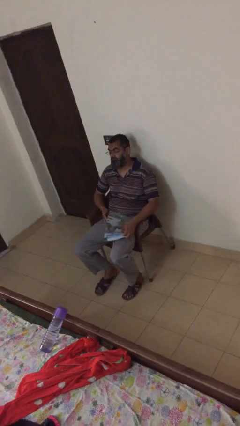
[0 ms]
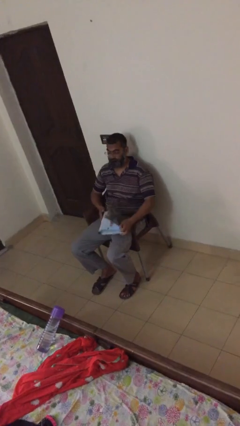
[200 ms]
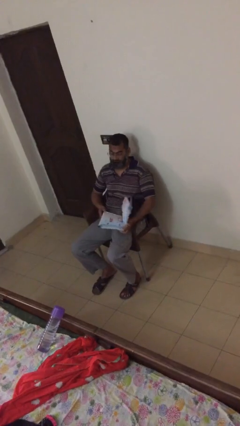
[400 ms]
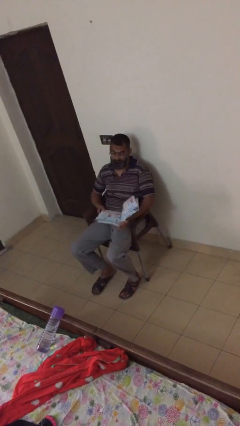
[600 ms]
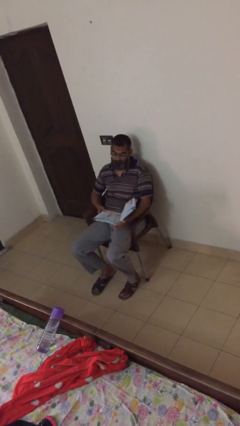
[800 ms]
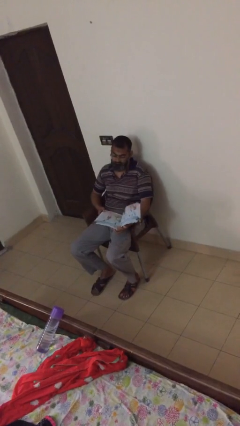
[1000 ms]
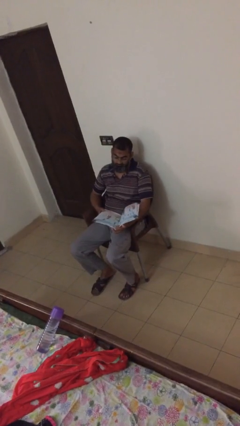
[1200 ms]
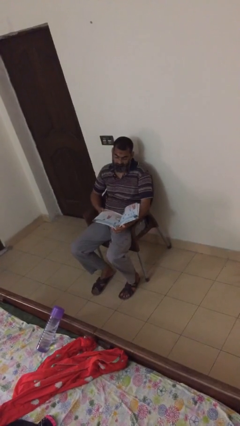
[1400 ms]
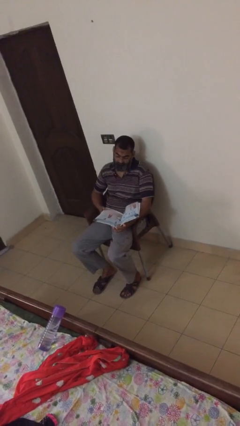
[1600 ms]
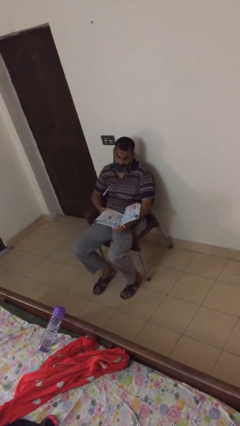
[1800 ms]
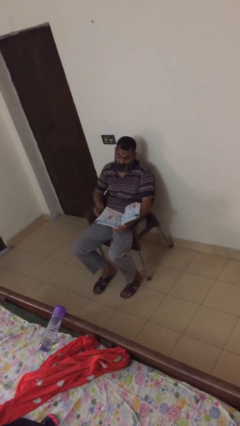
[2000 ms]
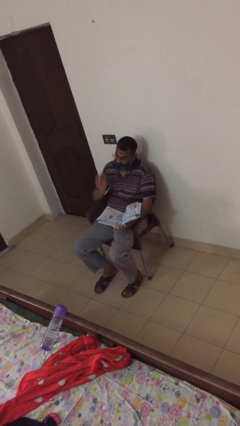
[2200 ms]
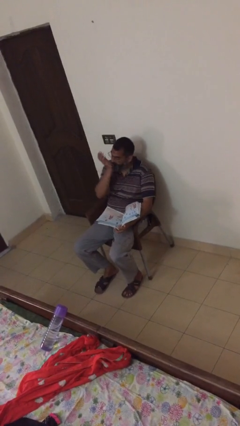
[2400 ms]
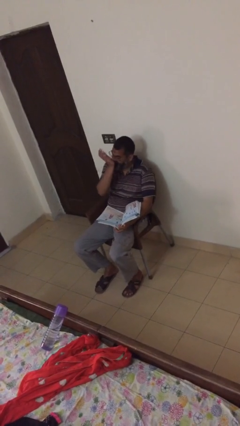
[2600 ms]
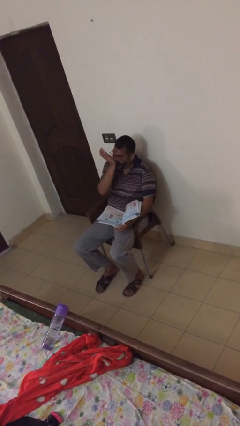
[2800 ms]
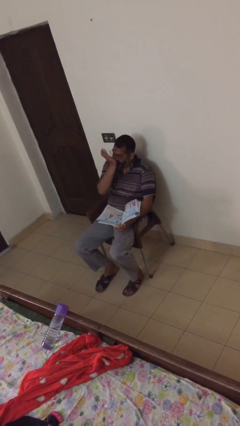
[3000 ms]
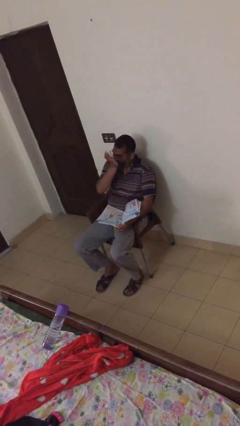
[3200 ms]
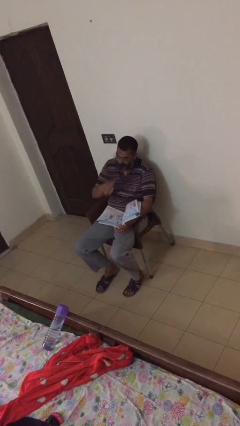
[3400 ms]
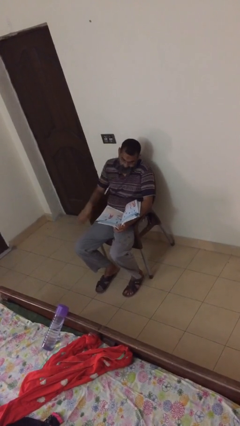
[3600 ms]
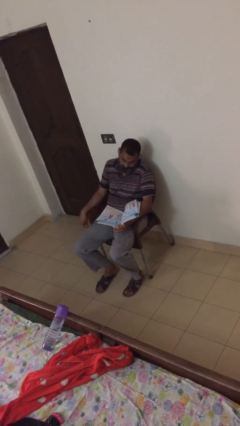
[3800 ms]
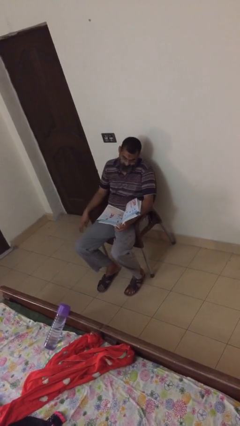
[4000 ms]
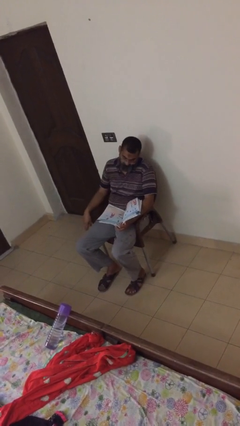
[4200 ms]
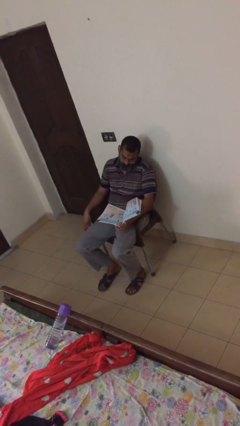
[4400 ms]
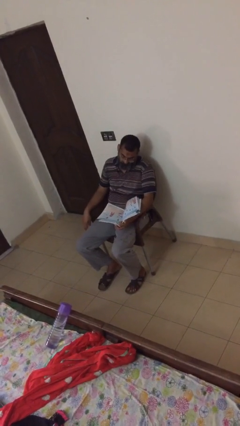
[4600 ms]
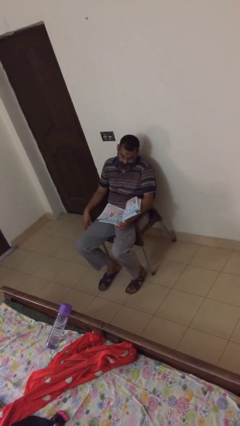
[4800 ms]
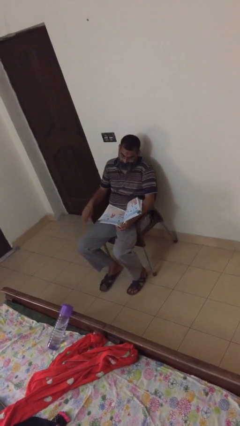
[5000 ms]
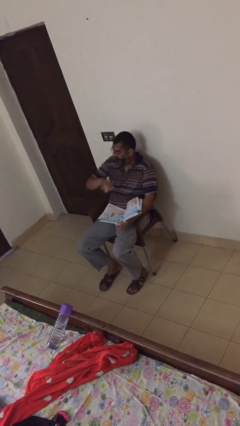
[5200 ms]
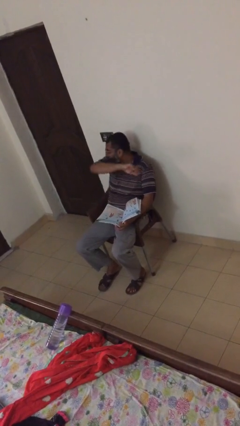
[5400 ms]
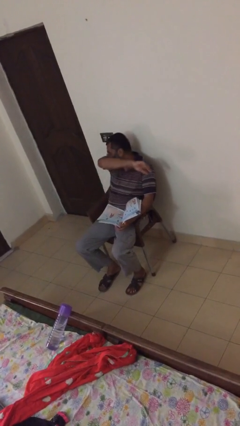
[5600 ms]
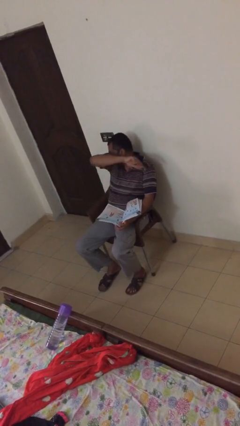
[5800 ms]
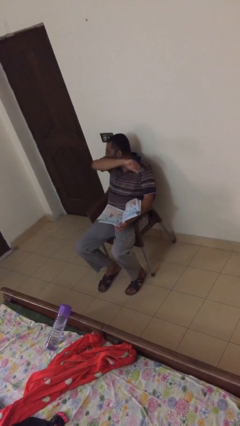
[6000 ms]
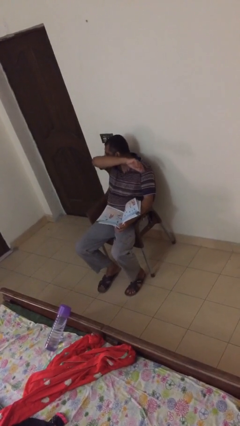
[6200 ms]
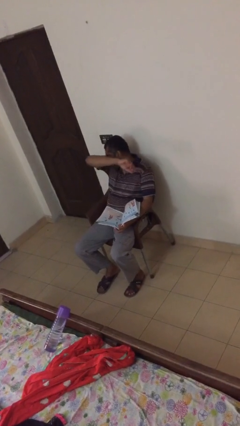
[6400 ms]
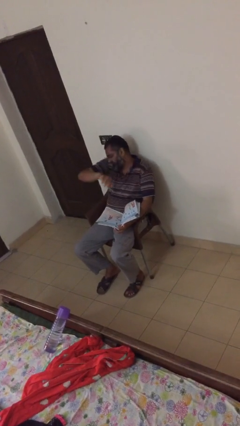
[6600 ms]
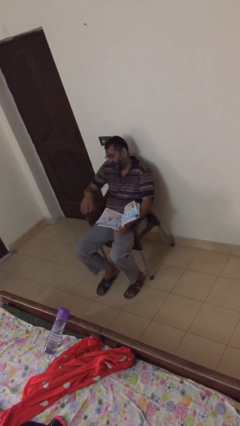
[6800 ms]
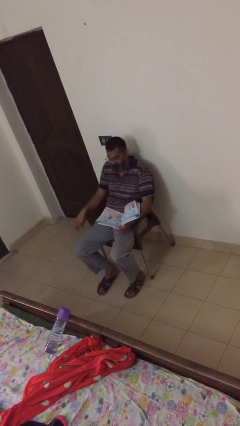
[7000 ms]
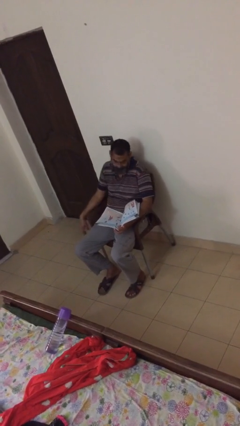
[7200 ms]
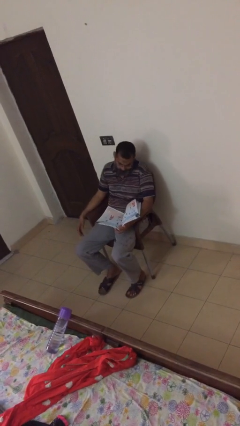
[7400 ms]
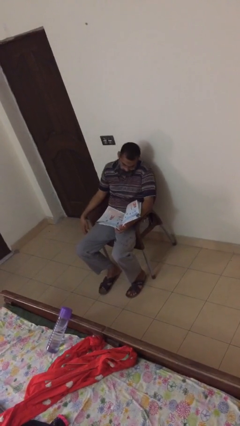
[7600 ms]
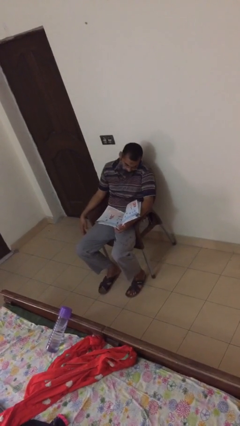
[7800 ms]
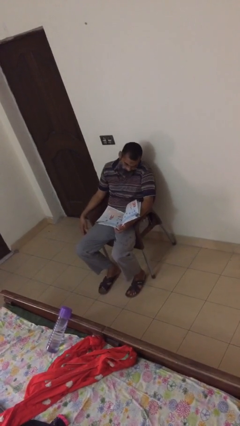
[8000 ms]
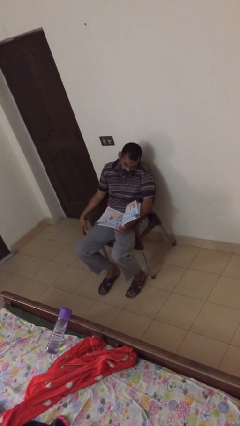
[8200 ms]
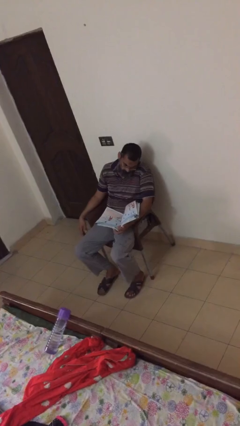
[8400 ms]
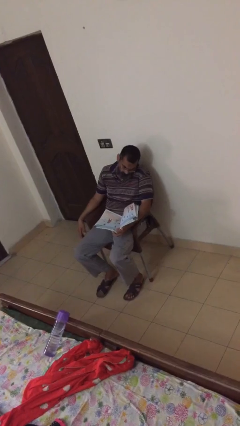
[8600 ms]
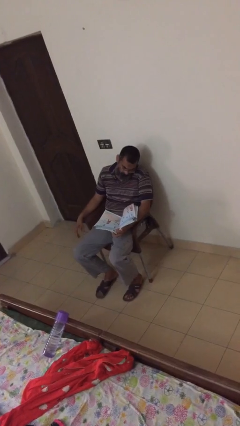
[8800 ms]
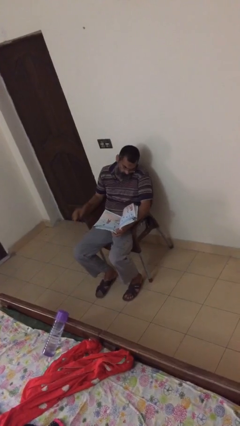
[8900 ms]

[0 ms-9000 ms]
person reads document

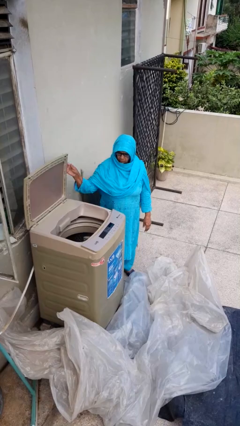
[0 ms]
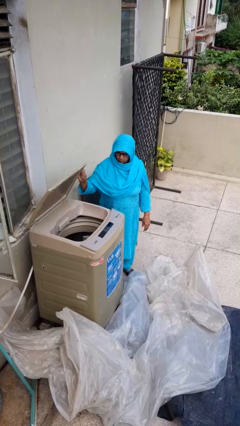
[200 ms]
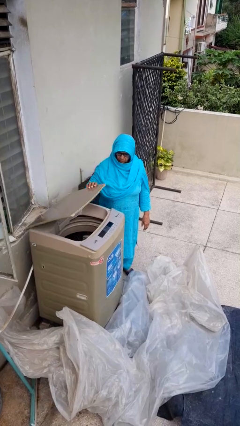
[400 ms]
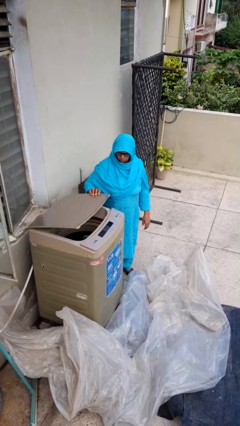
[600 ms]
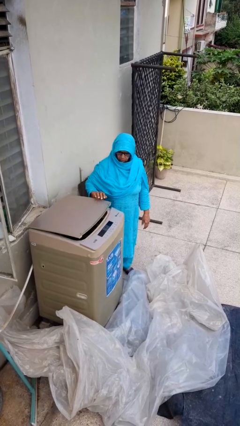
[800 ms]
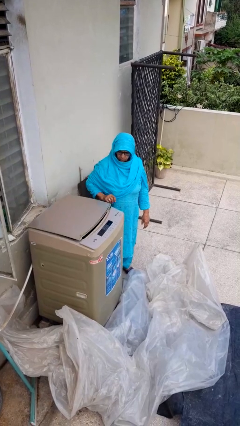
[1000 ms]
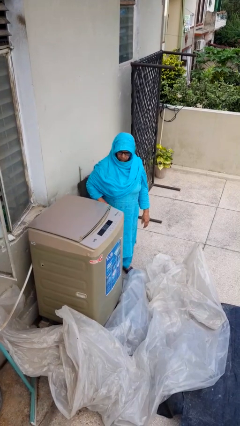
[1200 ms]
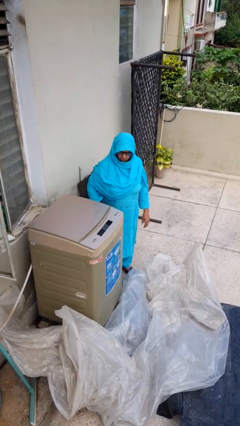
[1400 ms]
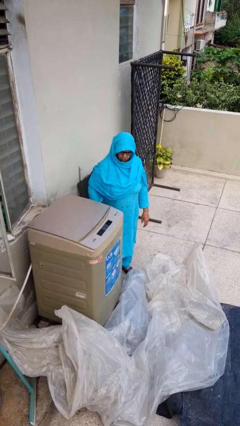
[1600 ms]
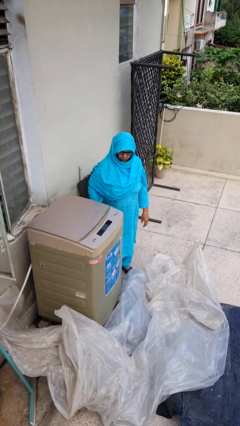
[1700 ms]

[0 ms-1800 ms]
person closes clothes washer

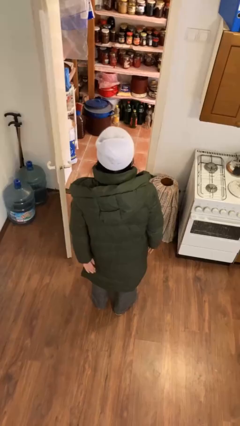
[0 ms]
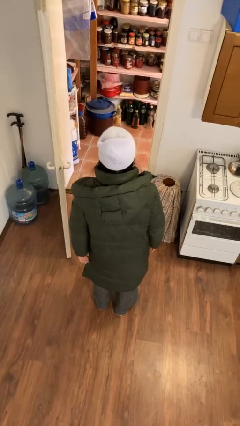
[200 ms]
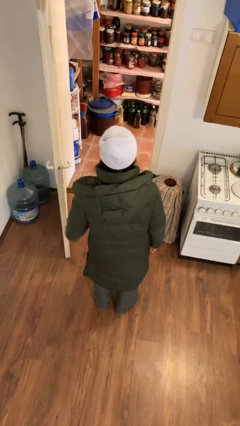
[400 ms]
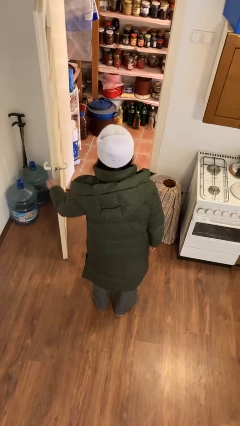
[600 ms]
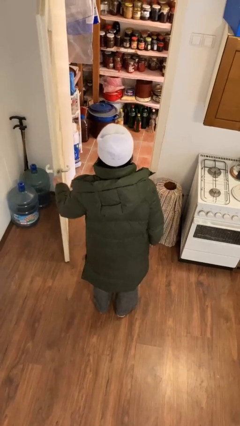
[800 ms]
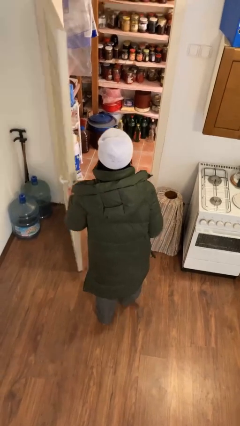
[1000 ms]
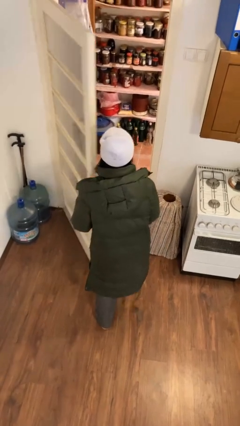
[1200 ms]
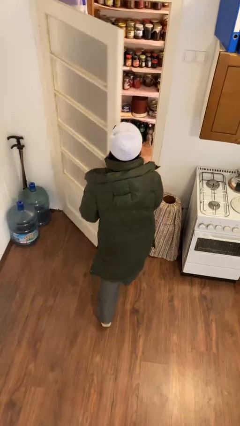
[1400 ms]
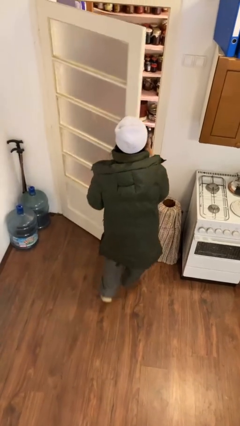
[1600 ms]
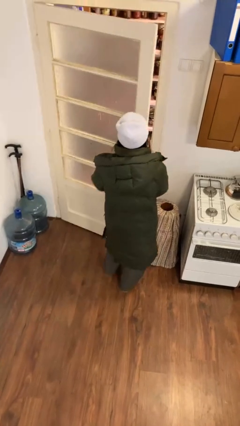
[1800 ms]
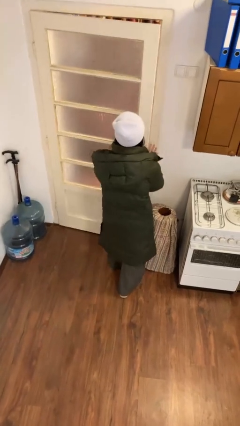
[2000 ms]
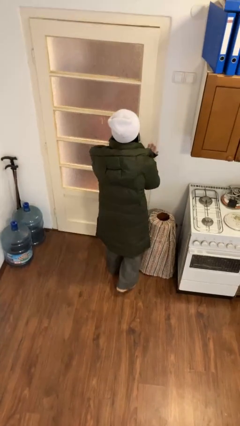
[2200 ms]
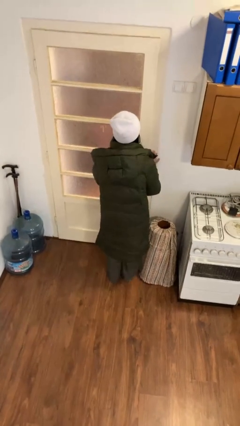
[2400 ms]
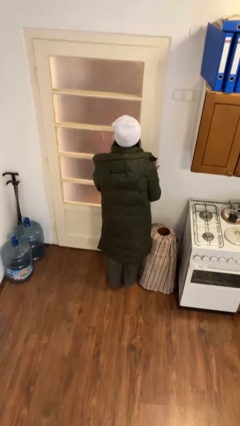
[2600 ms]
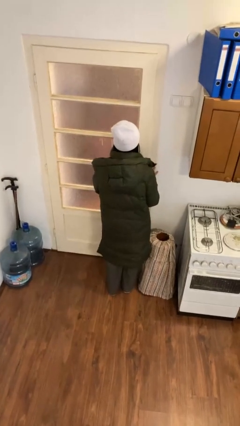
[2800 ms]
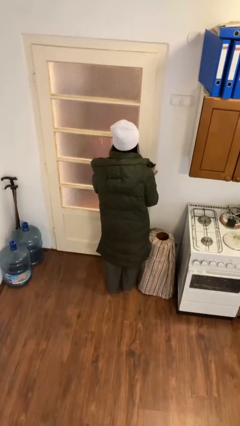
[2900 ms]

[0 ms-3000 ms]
person closes facility door

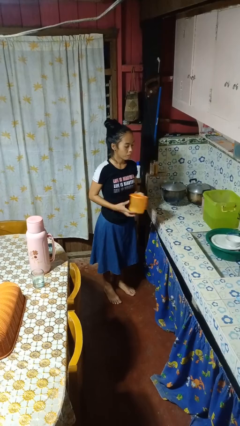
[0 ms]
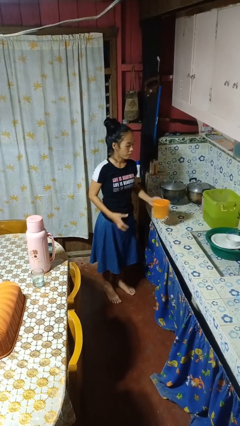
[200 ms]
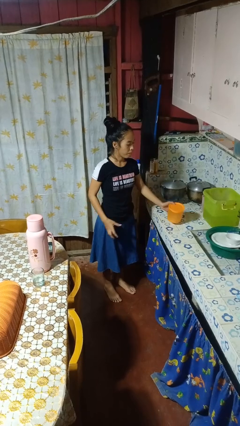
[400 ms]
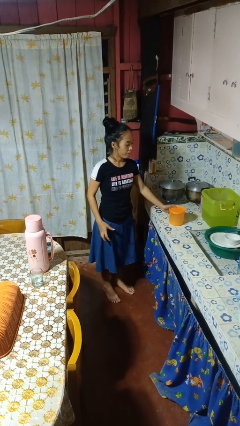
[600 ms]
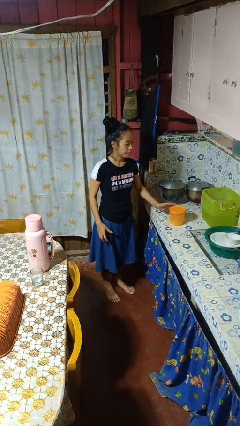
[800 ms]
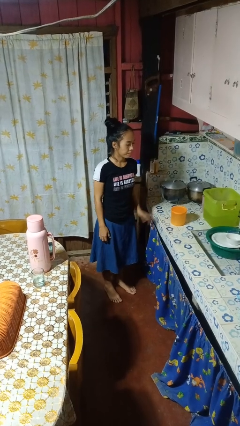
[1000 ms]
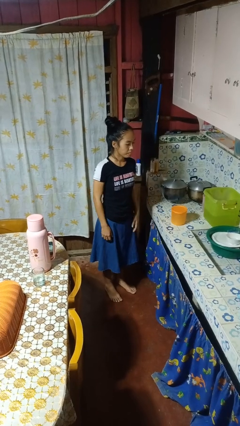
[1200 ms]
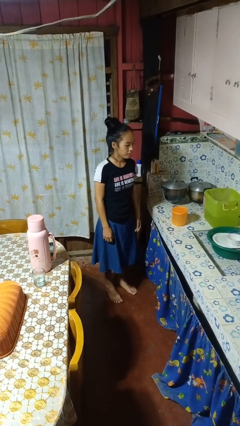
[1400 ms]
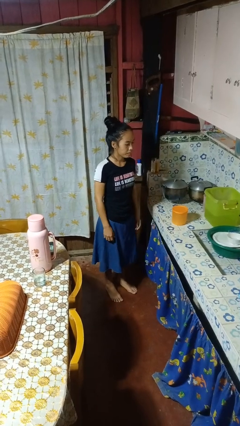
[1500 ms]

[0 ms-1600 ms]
person puts down object on countertop

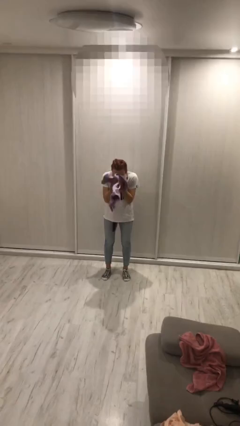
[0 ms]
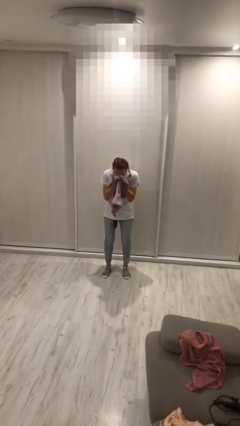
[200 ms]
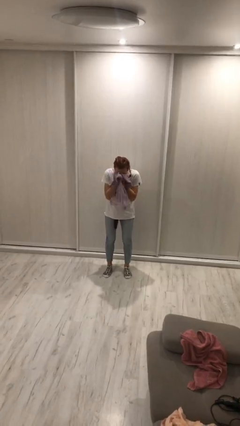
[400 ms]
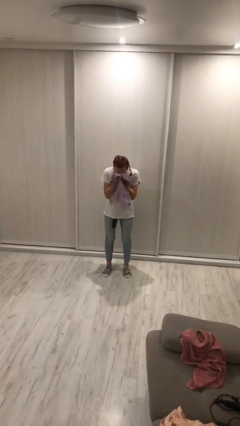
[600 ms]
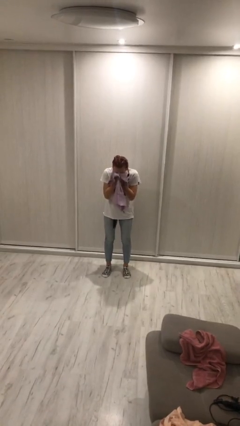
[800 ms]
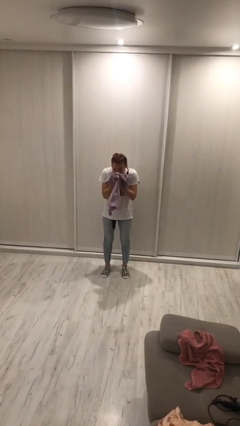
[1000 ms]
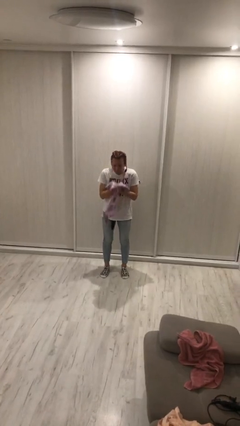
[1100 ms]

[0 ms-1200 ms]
person blows nose

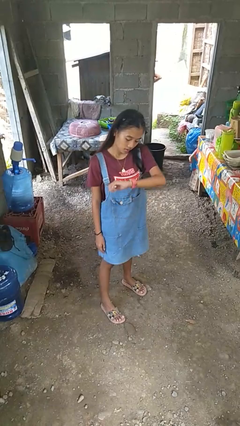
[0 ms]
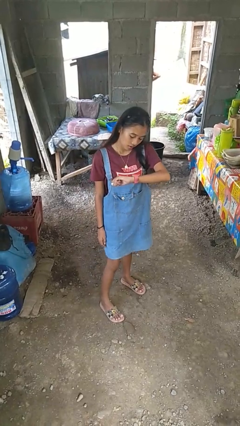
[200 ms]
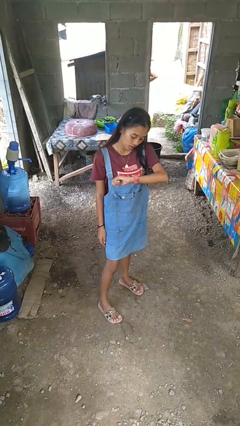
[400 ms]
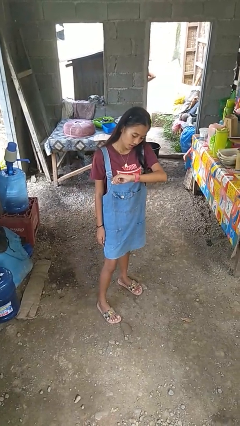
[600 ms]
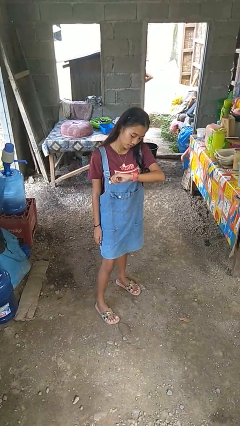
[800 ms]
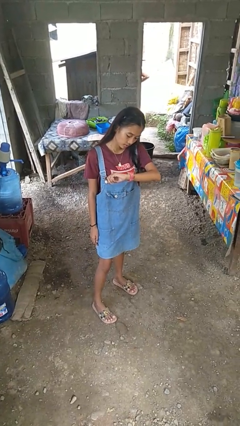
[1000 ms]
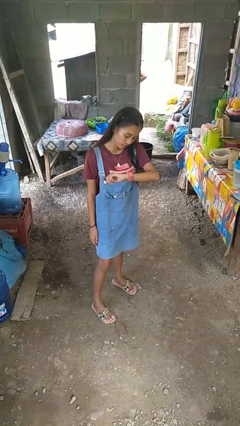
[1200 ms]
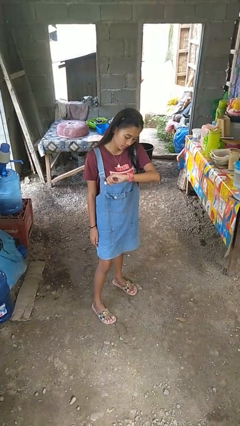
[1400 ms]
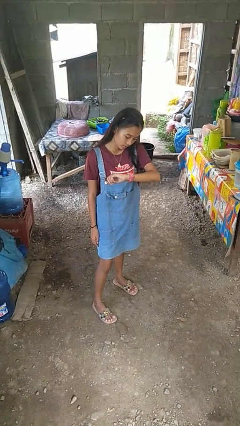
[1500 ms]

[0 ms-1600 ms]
person looks at wristwatch
